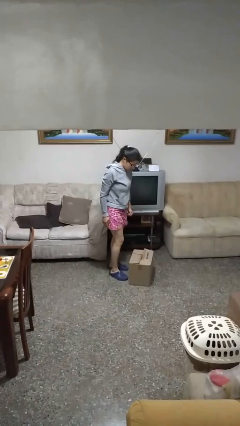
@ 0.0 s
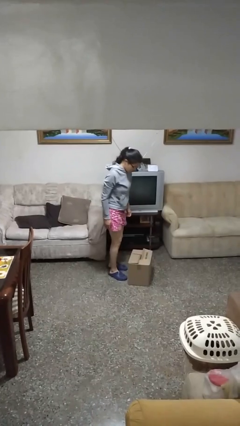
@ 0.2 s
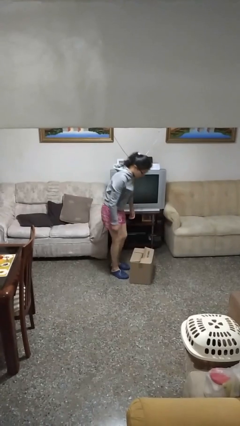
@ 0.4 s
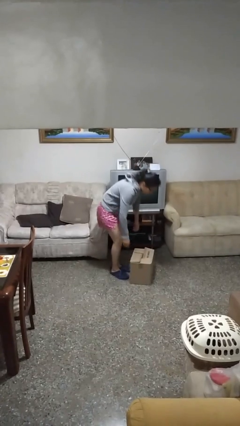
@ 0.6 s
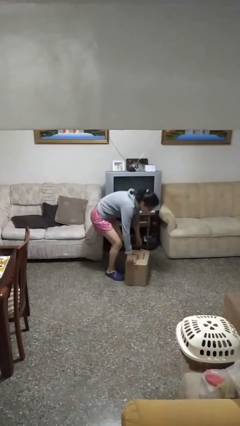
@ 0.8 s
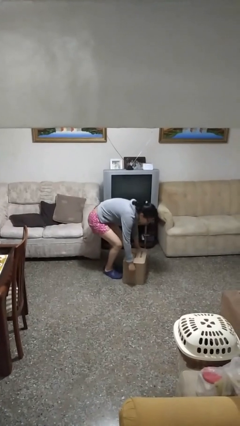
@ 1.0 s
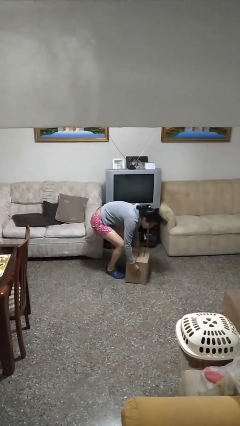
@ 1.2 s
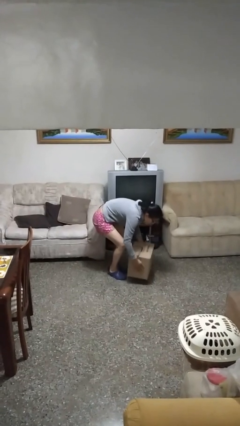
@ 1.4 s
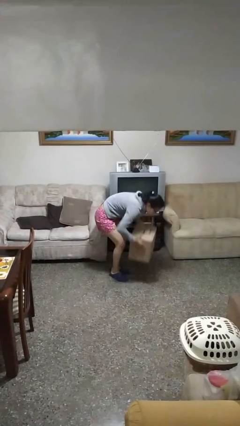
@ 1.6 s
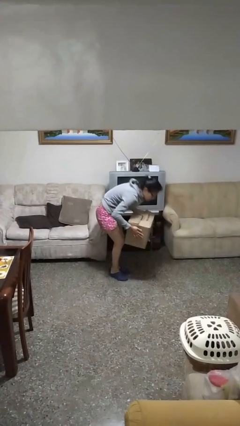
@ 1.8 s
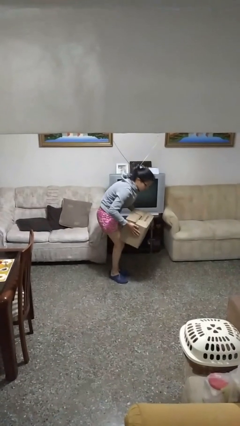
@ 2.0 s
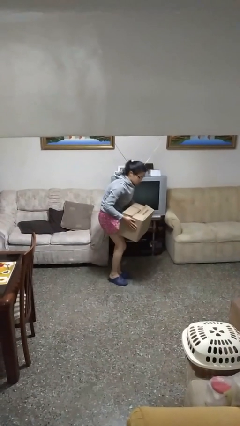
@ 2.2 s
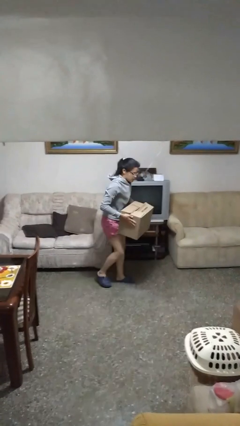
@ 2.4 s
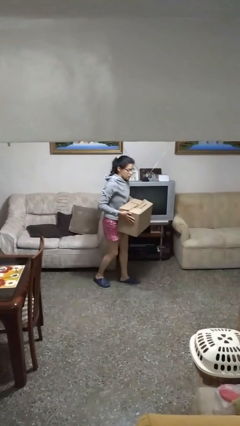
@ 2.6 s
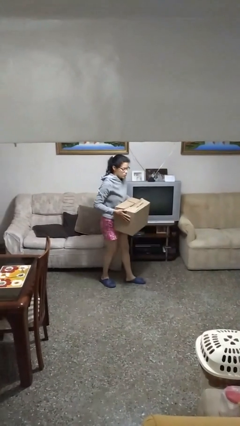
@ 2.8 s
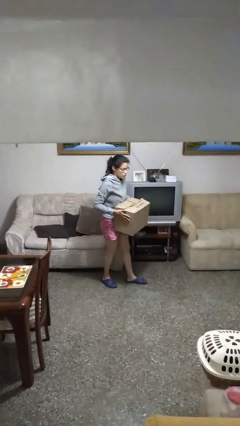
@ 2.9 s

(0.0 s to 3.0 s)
person picks up object from floor

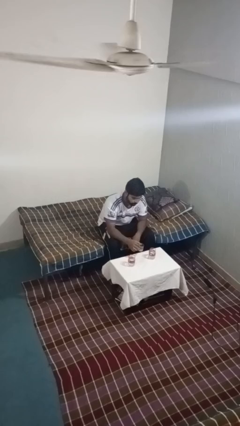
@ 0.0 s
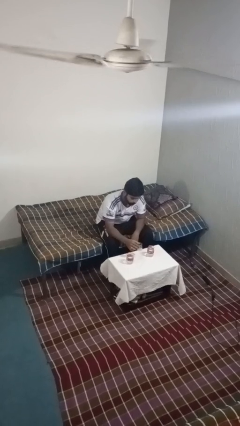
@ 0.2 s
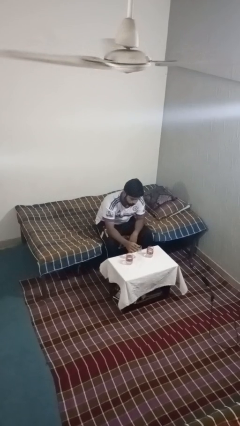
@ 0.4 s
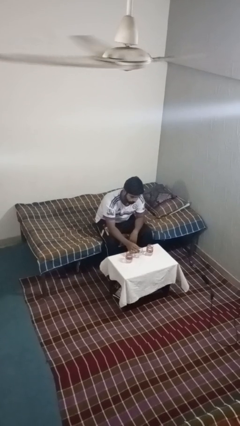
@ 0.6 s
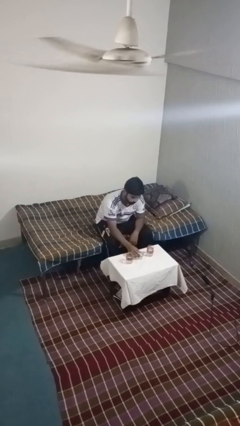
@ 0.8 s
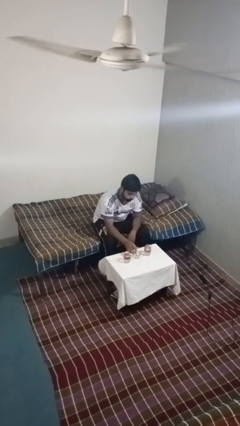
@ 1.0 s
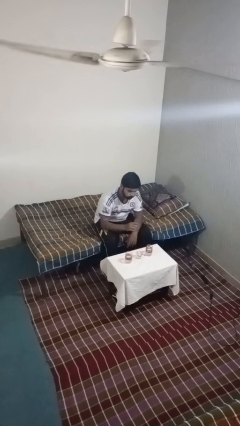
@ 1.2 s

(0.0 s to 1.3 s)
person puts down object on table

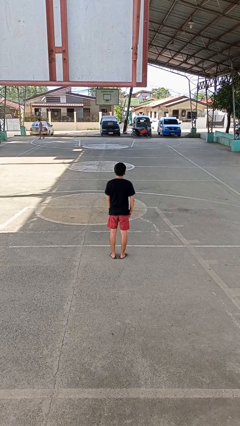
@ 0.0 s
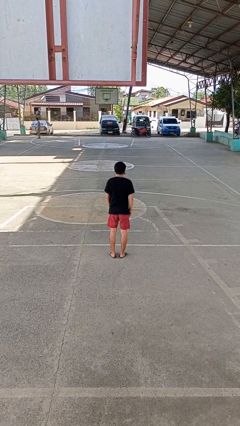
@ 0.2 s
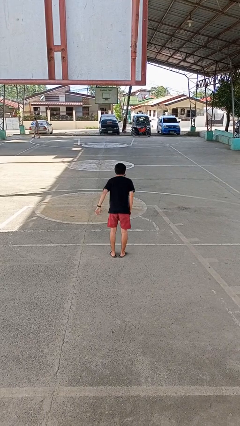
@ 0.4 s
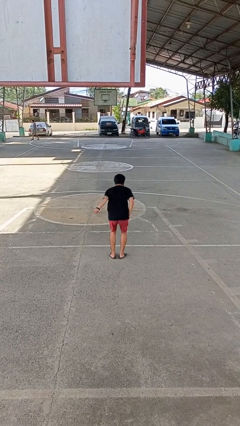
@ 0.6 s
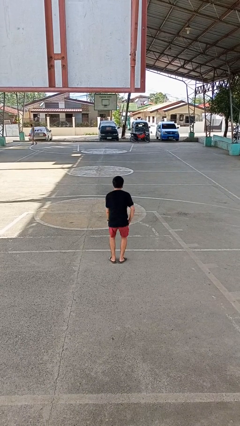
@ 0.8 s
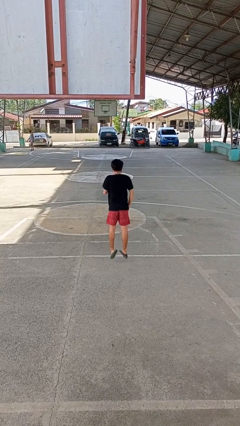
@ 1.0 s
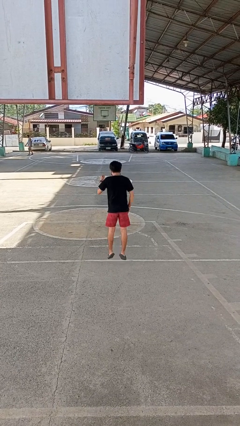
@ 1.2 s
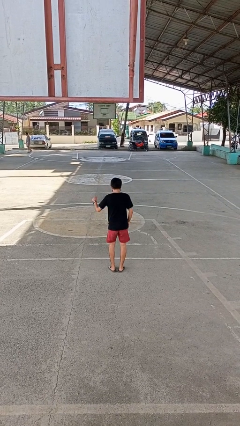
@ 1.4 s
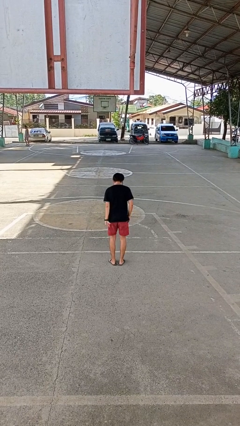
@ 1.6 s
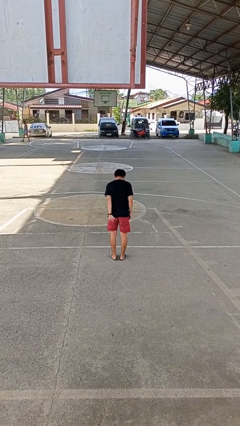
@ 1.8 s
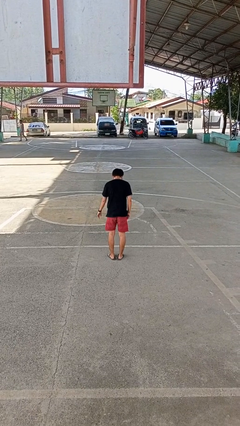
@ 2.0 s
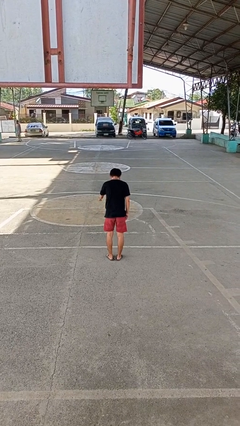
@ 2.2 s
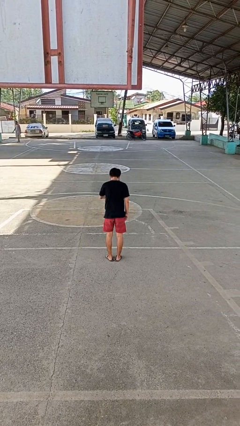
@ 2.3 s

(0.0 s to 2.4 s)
person jumps

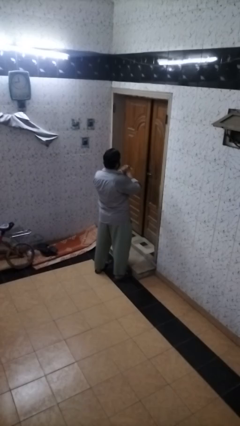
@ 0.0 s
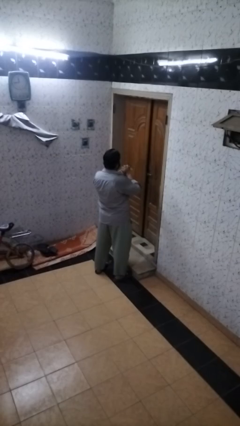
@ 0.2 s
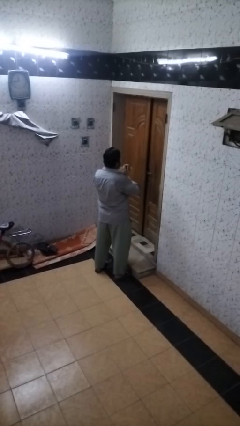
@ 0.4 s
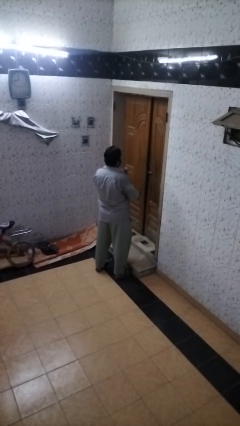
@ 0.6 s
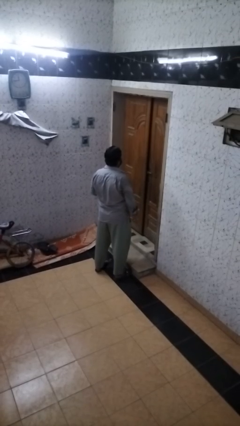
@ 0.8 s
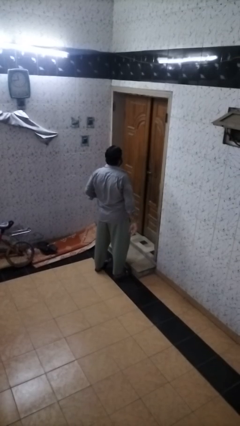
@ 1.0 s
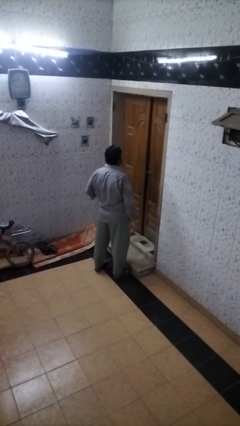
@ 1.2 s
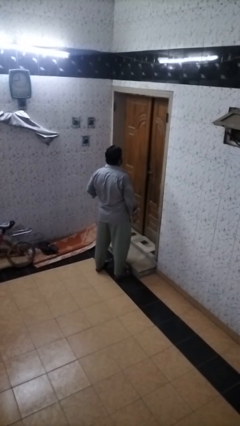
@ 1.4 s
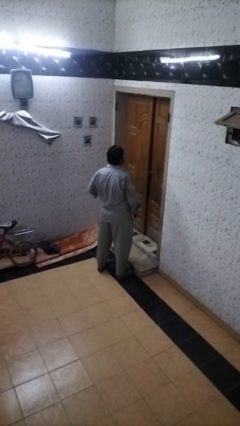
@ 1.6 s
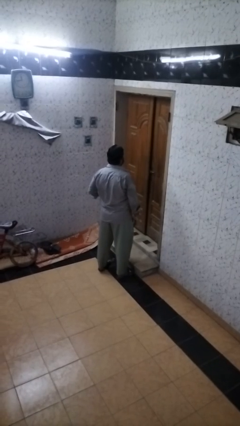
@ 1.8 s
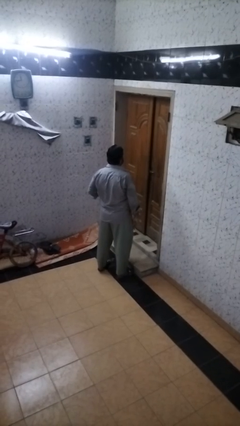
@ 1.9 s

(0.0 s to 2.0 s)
person takes off ring

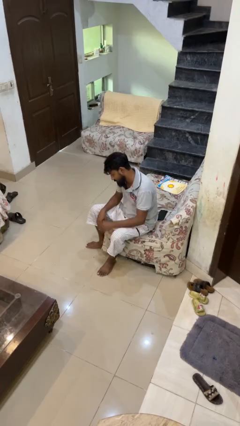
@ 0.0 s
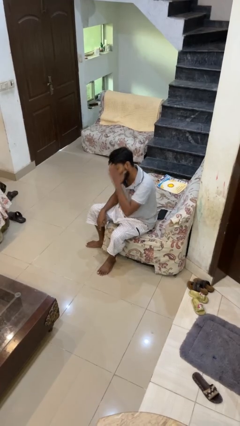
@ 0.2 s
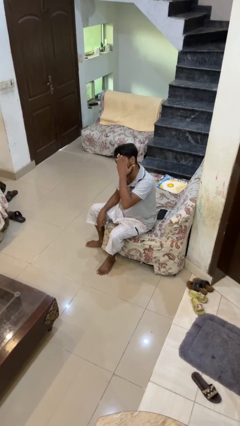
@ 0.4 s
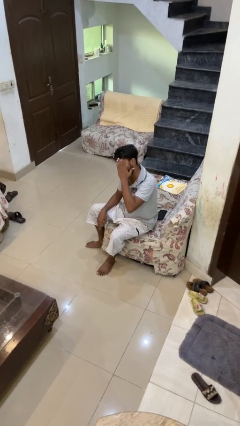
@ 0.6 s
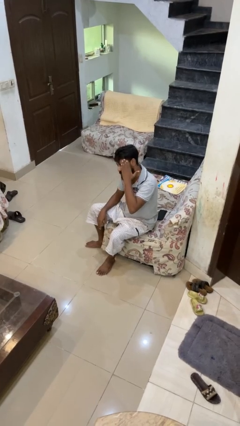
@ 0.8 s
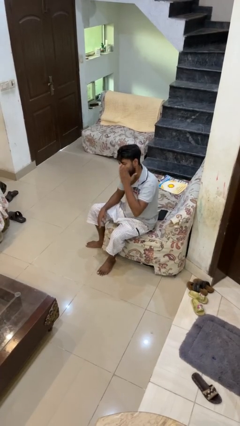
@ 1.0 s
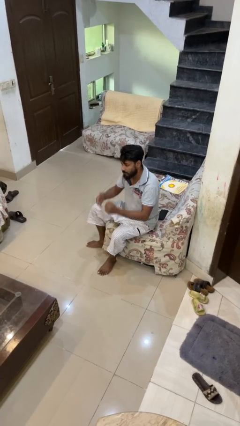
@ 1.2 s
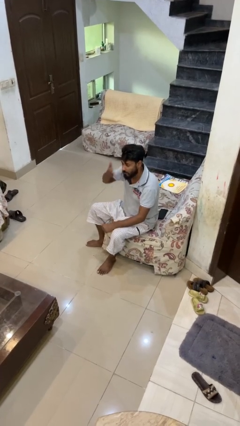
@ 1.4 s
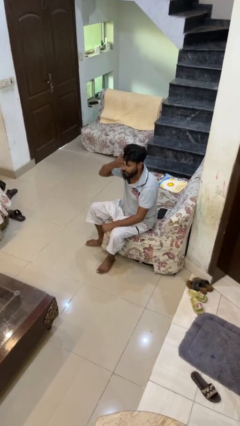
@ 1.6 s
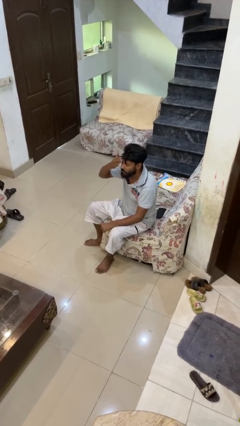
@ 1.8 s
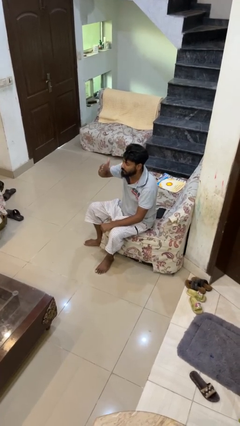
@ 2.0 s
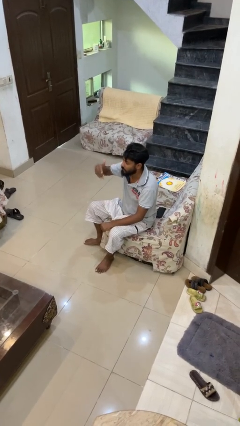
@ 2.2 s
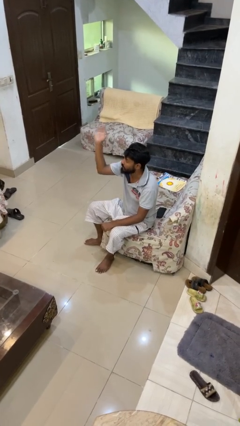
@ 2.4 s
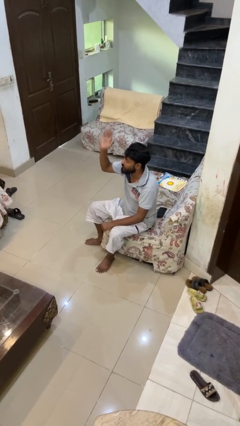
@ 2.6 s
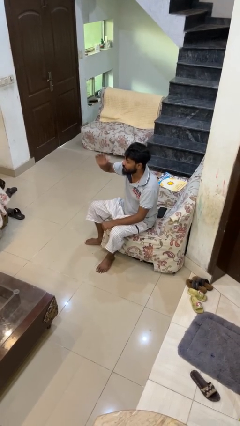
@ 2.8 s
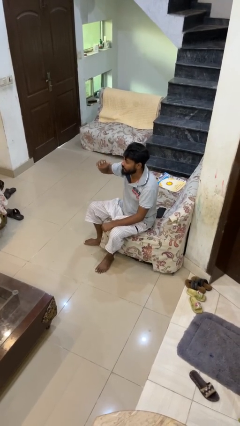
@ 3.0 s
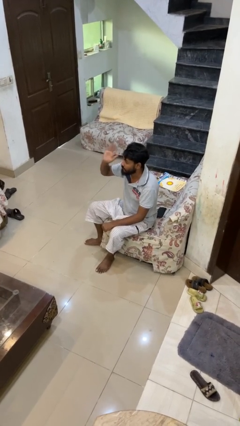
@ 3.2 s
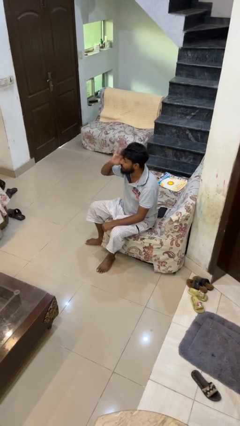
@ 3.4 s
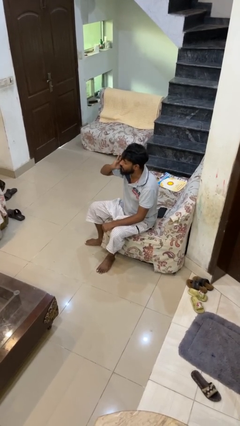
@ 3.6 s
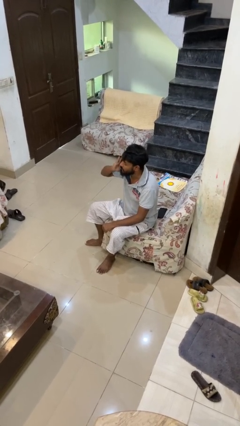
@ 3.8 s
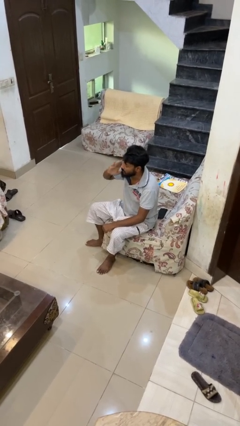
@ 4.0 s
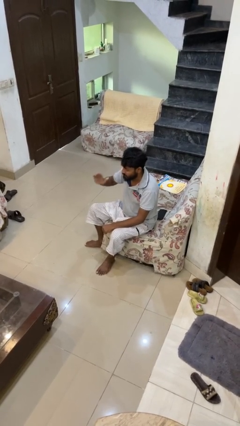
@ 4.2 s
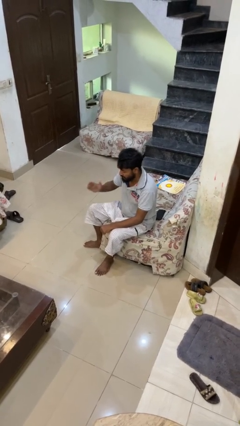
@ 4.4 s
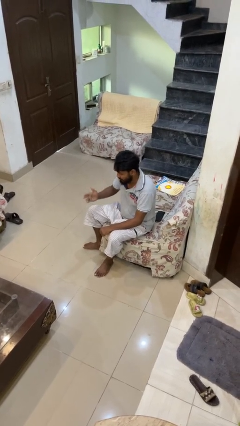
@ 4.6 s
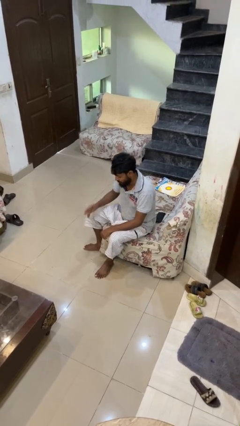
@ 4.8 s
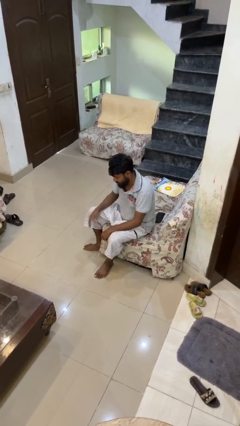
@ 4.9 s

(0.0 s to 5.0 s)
person swats bug

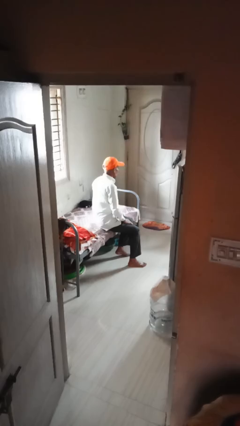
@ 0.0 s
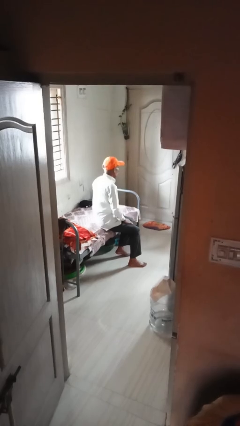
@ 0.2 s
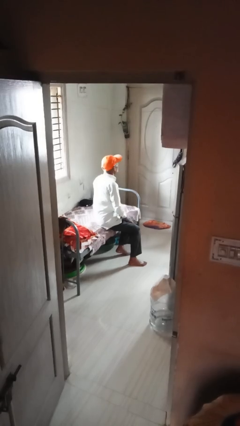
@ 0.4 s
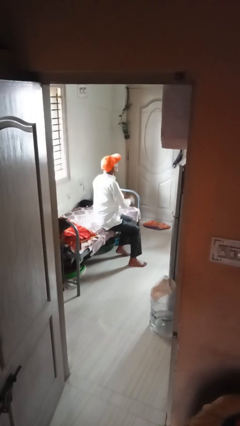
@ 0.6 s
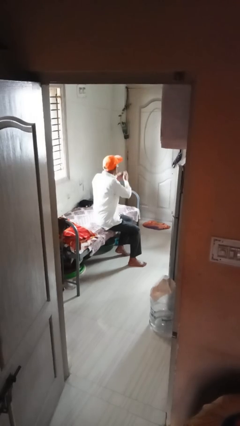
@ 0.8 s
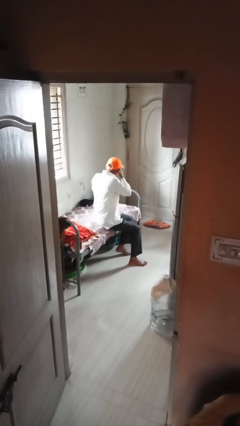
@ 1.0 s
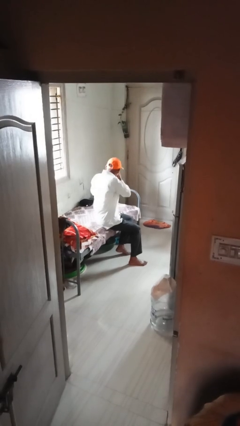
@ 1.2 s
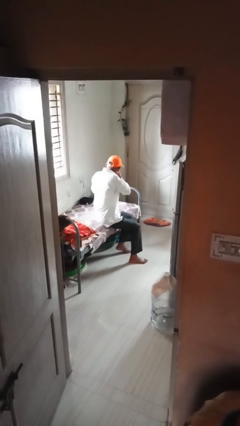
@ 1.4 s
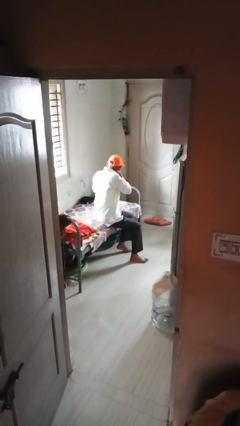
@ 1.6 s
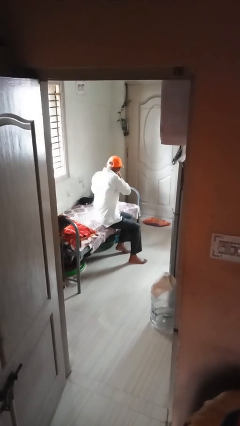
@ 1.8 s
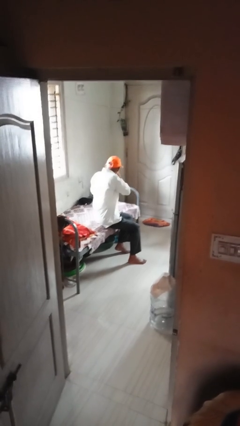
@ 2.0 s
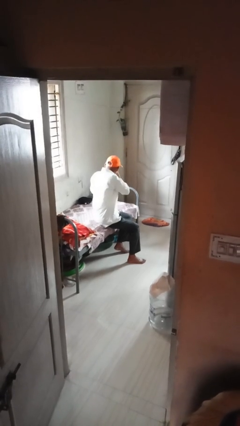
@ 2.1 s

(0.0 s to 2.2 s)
person sneezes into hand

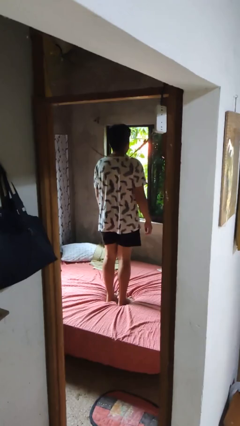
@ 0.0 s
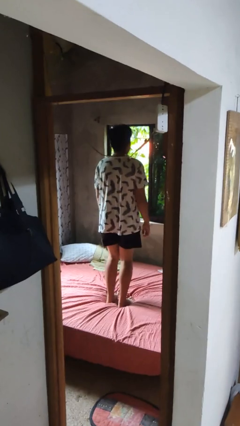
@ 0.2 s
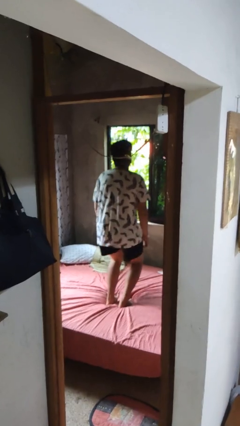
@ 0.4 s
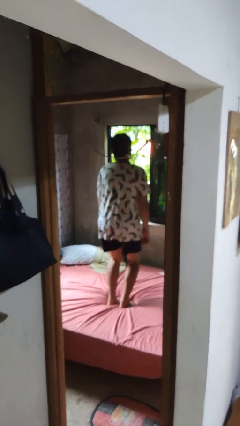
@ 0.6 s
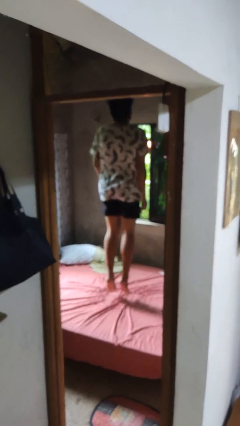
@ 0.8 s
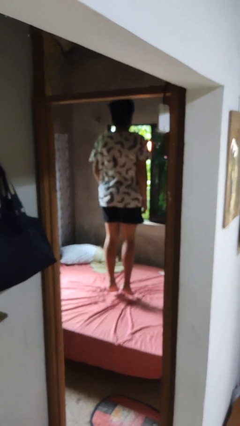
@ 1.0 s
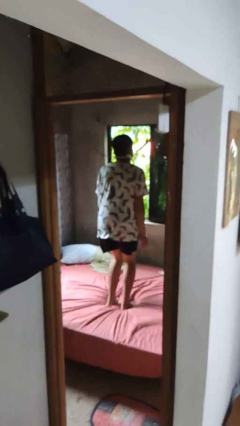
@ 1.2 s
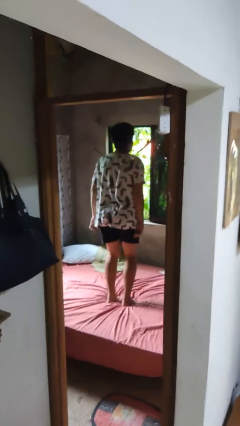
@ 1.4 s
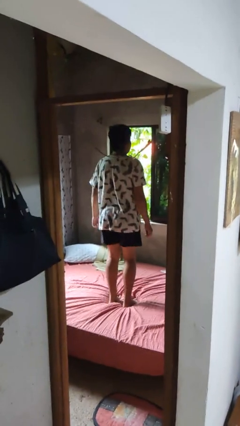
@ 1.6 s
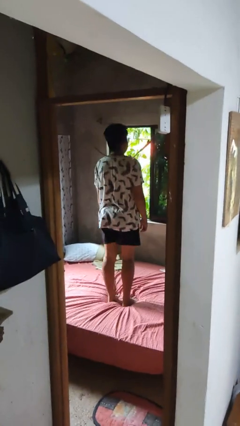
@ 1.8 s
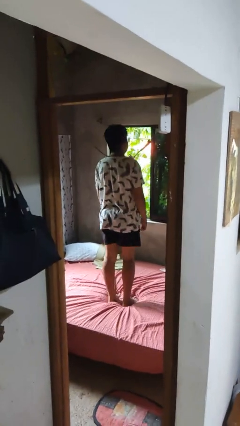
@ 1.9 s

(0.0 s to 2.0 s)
person jumps on bed
